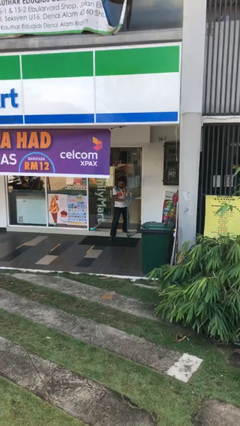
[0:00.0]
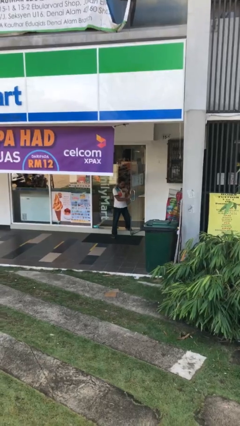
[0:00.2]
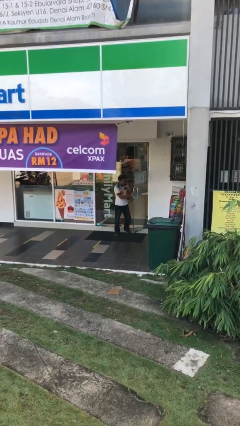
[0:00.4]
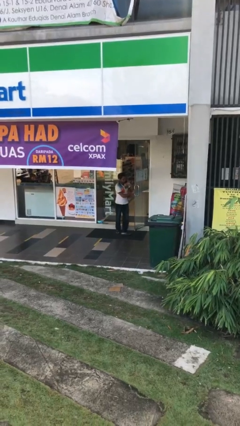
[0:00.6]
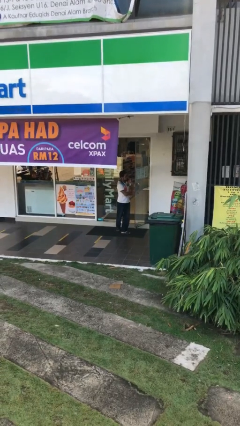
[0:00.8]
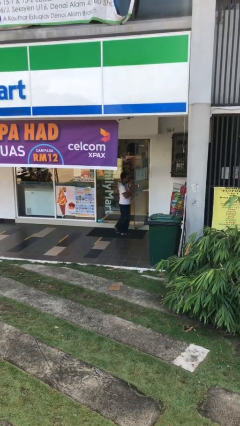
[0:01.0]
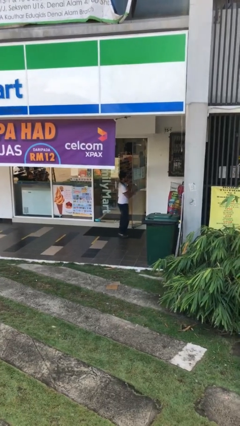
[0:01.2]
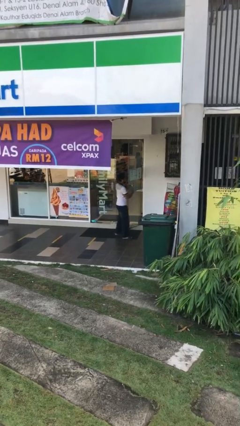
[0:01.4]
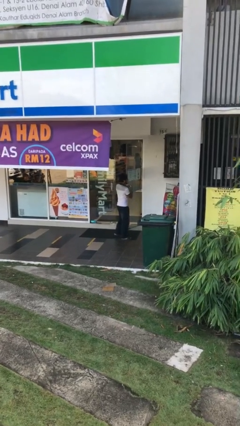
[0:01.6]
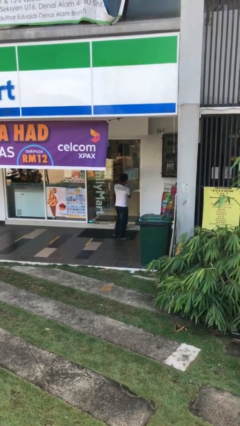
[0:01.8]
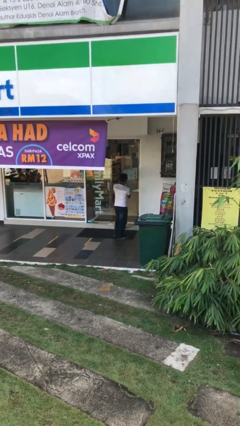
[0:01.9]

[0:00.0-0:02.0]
person enters scene through structure

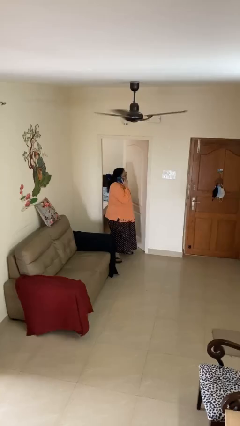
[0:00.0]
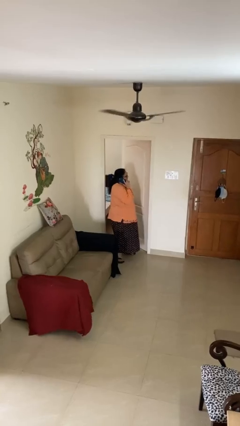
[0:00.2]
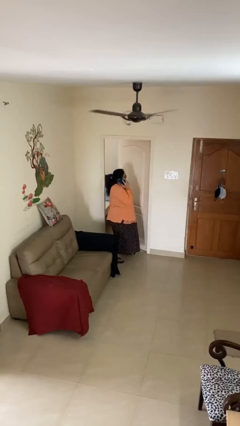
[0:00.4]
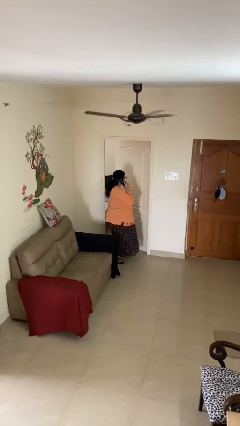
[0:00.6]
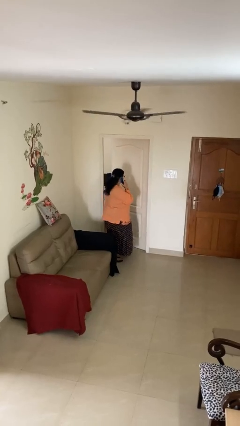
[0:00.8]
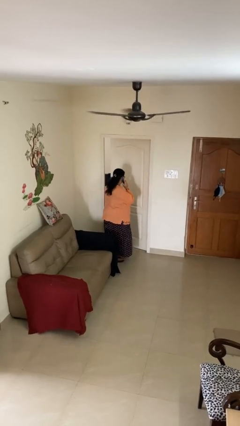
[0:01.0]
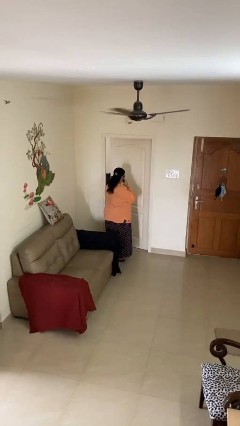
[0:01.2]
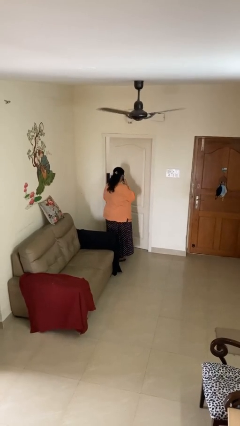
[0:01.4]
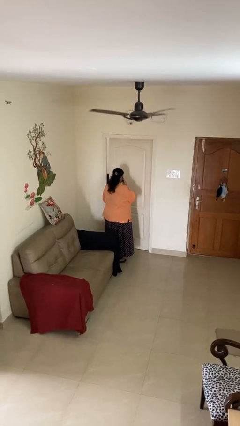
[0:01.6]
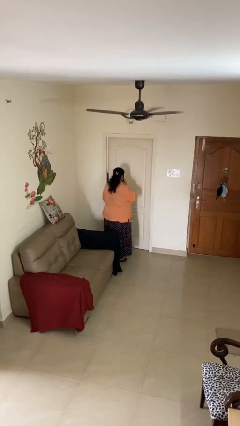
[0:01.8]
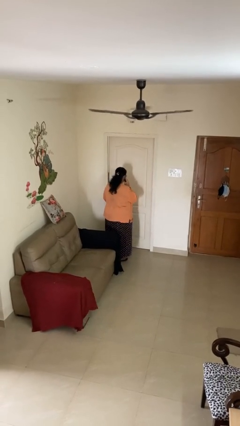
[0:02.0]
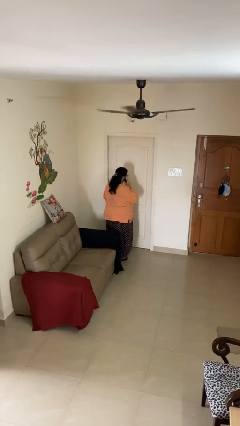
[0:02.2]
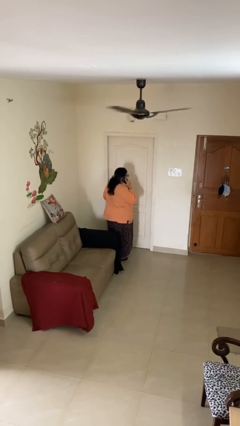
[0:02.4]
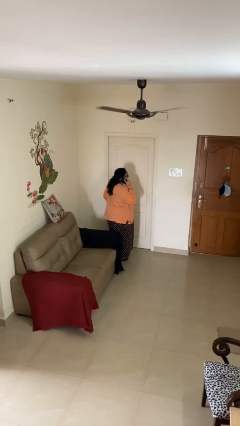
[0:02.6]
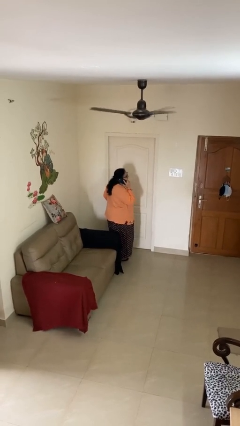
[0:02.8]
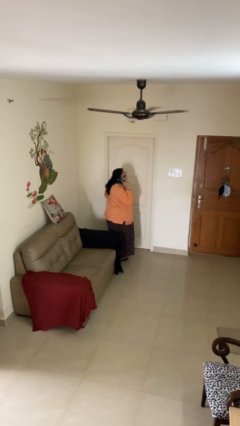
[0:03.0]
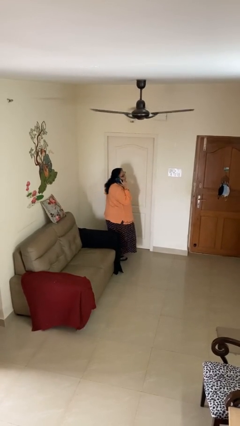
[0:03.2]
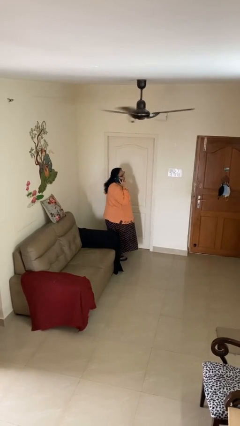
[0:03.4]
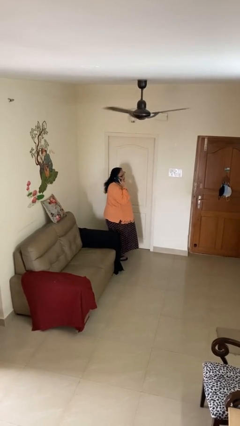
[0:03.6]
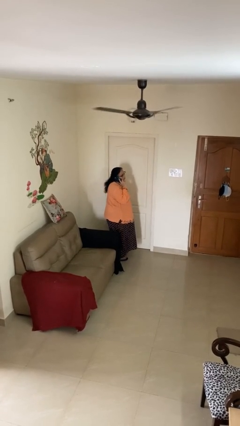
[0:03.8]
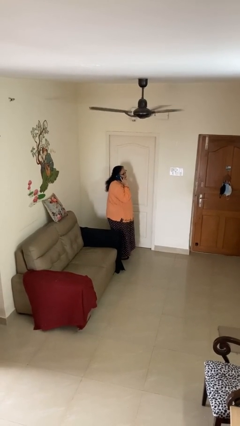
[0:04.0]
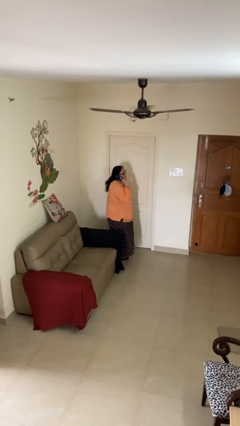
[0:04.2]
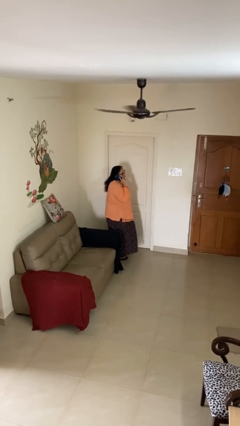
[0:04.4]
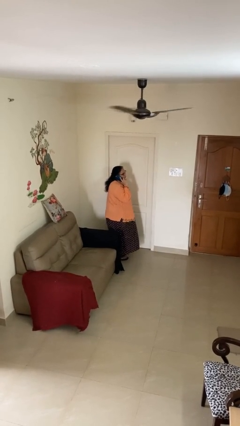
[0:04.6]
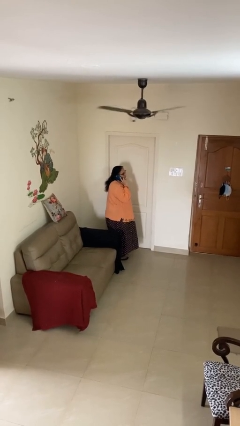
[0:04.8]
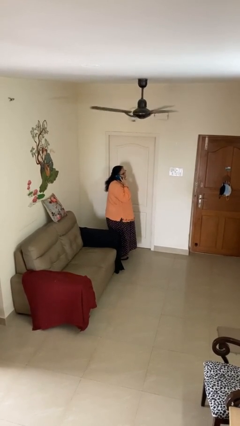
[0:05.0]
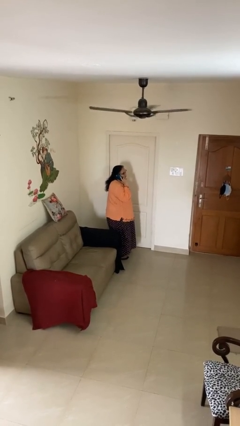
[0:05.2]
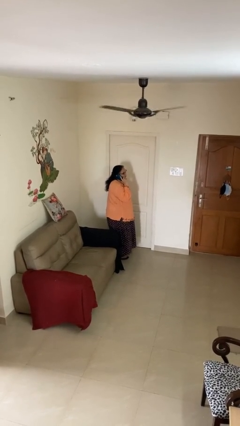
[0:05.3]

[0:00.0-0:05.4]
person closes facility door

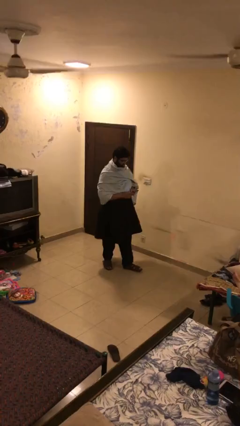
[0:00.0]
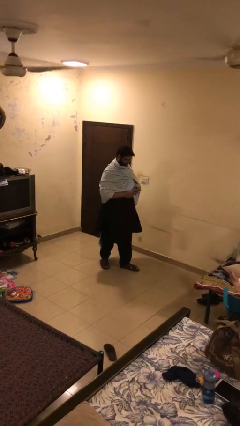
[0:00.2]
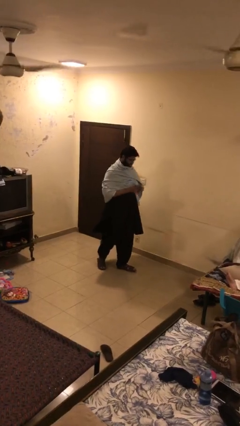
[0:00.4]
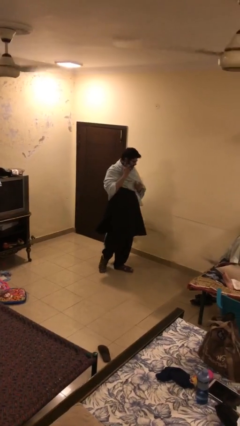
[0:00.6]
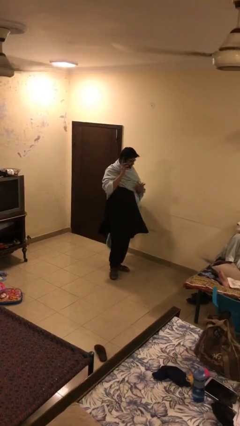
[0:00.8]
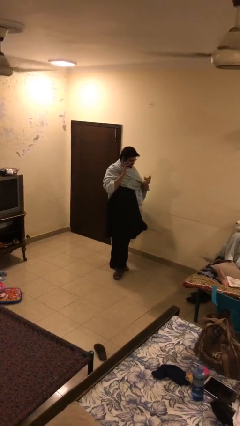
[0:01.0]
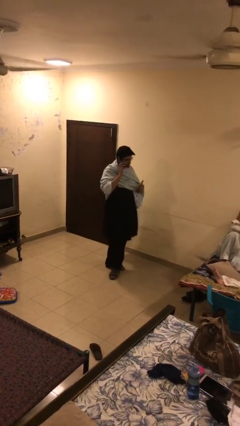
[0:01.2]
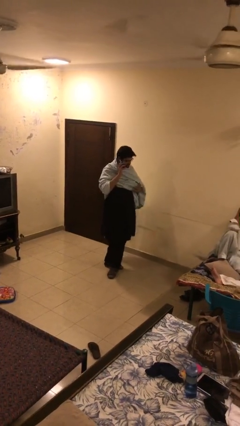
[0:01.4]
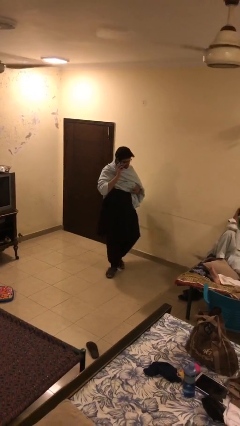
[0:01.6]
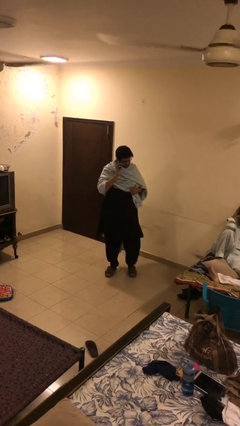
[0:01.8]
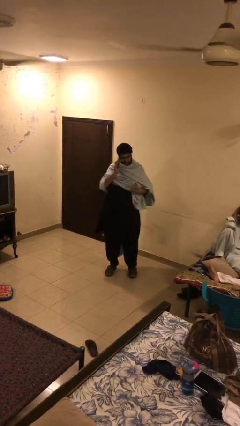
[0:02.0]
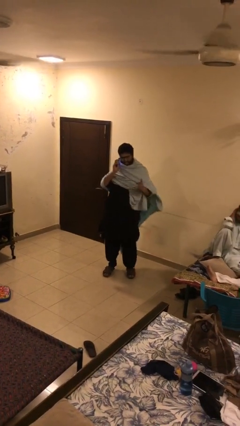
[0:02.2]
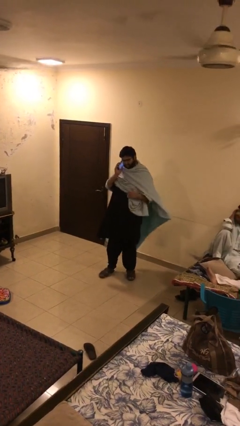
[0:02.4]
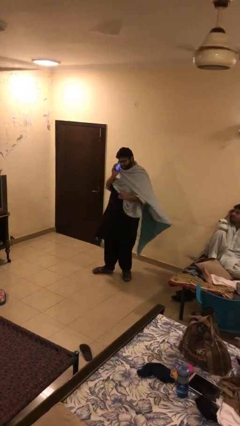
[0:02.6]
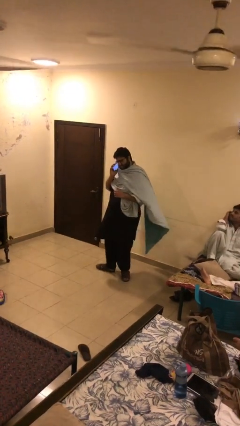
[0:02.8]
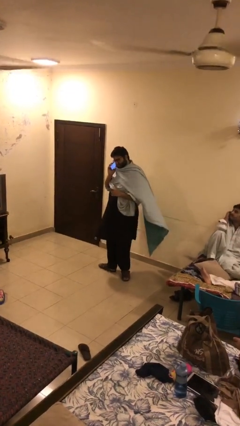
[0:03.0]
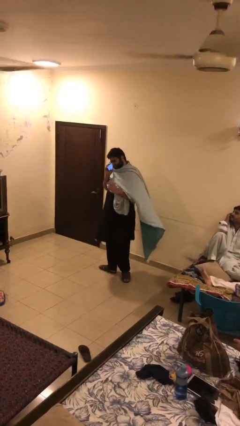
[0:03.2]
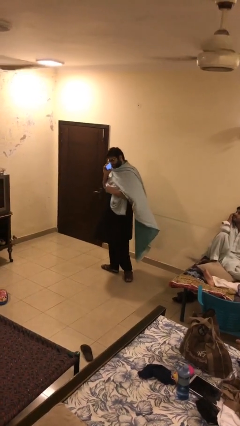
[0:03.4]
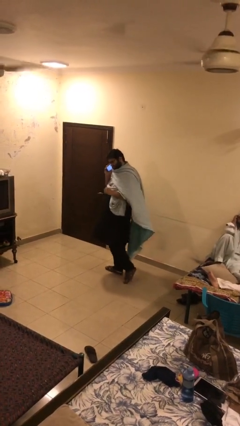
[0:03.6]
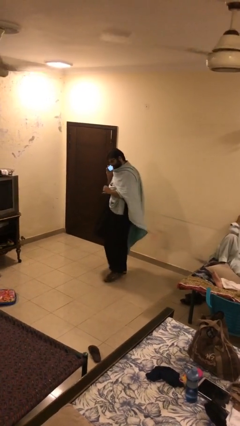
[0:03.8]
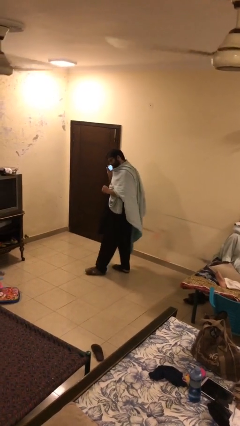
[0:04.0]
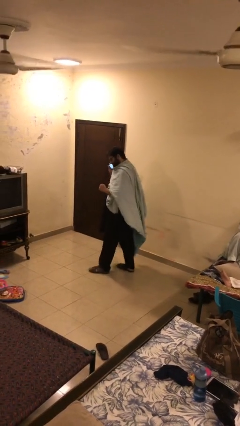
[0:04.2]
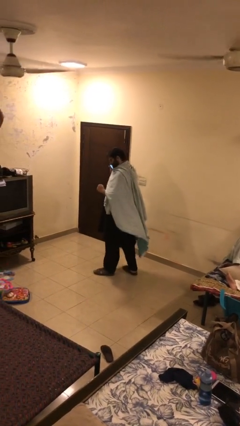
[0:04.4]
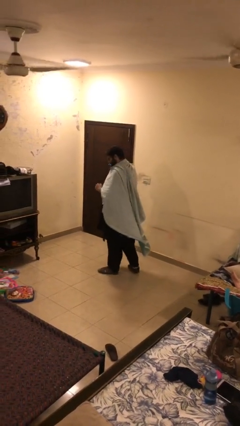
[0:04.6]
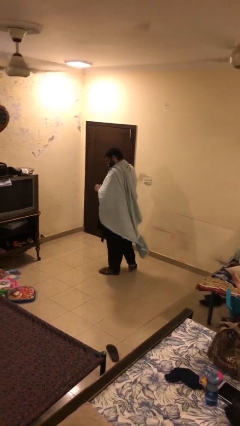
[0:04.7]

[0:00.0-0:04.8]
person talks on phone

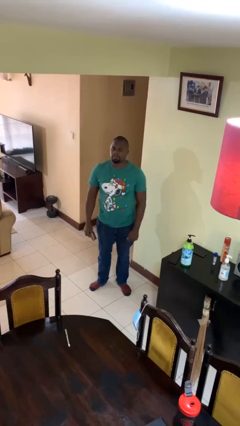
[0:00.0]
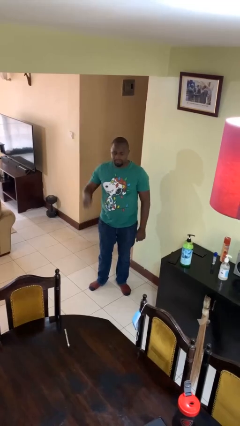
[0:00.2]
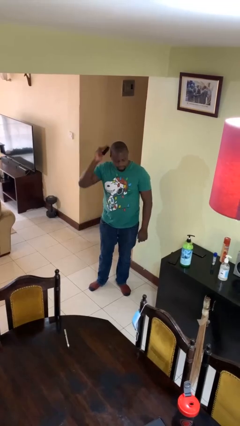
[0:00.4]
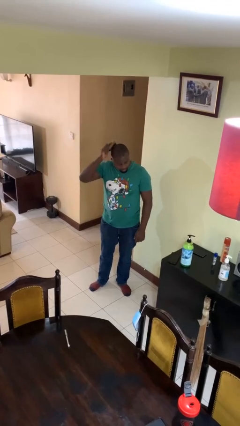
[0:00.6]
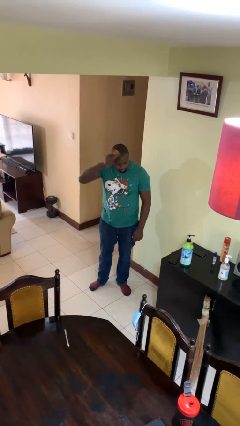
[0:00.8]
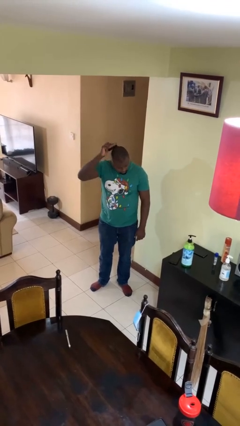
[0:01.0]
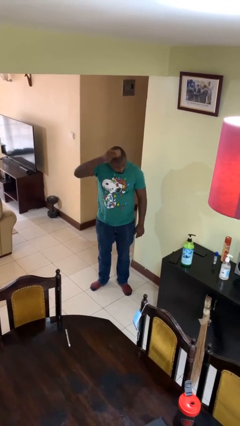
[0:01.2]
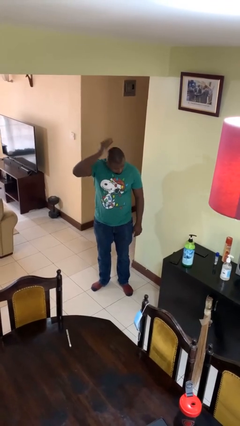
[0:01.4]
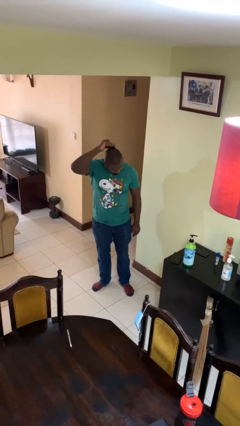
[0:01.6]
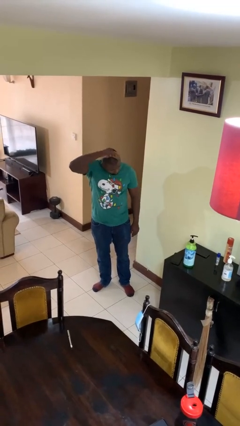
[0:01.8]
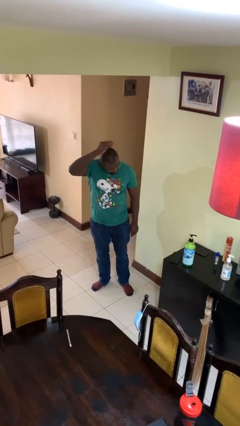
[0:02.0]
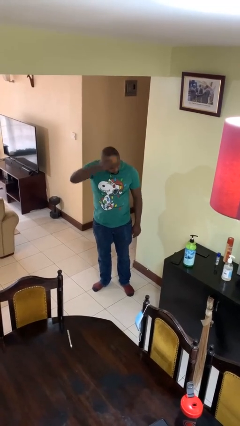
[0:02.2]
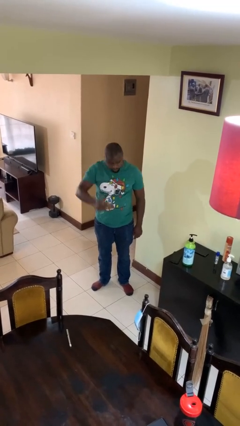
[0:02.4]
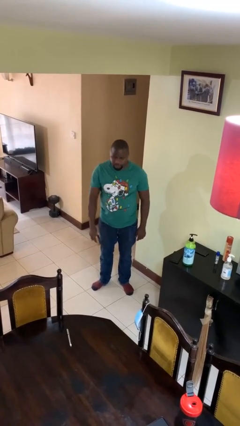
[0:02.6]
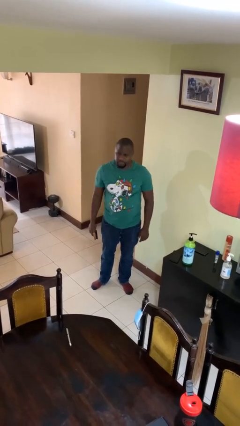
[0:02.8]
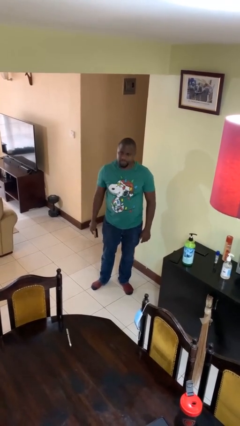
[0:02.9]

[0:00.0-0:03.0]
person brushes hair

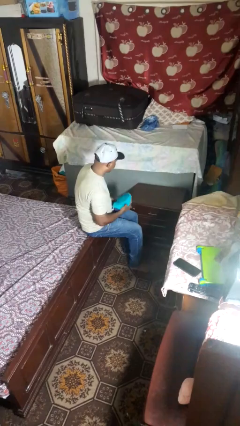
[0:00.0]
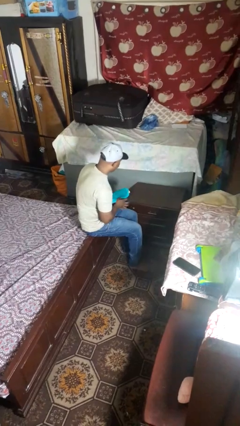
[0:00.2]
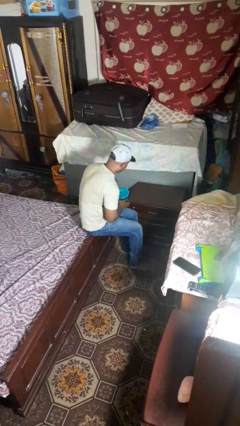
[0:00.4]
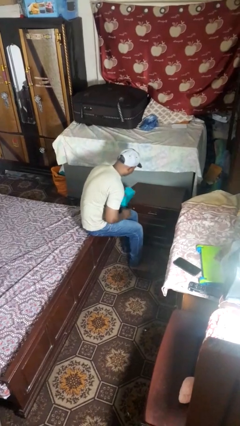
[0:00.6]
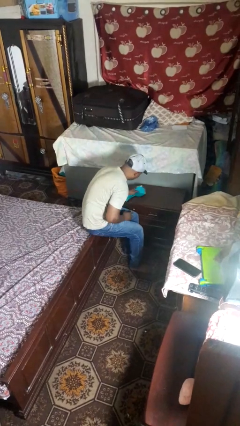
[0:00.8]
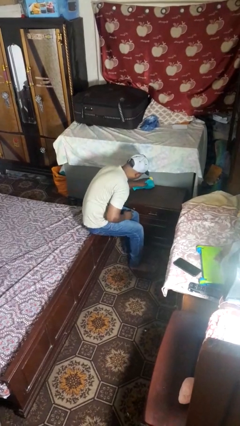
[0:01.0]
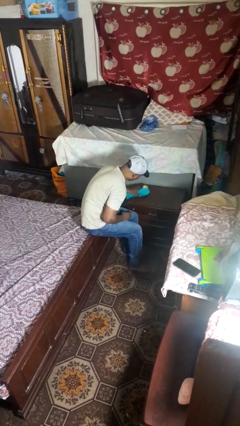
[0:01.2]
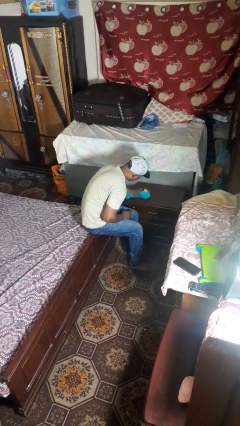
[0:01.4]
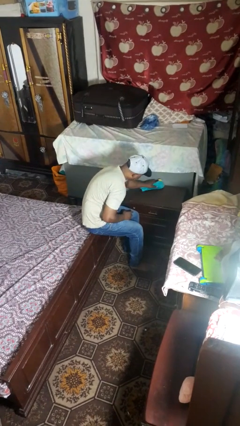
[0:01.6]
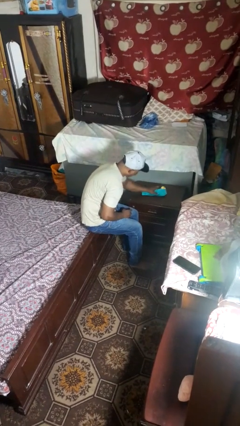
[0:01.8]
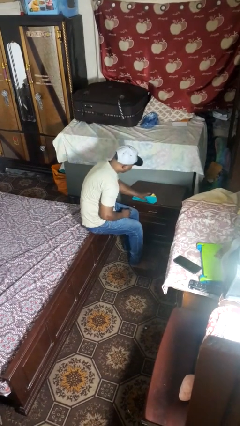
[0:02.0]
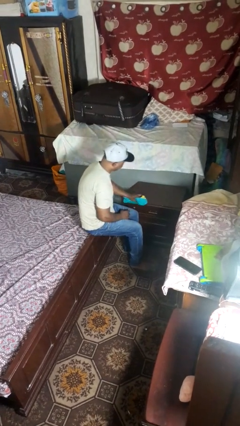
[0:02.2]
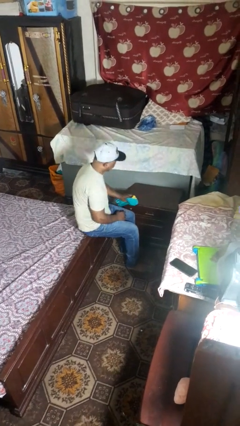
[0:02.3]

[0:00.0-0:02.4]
person cleans table with rag
